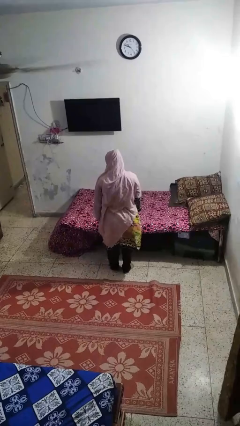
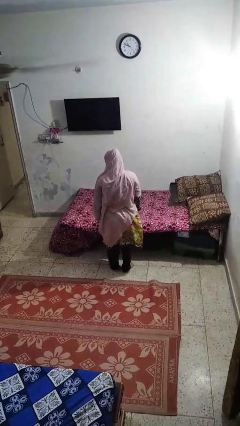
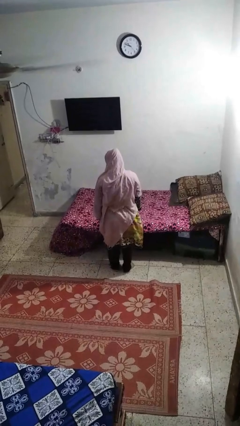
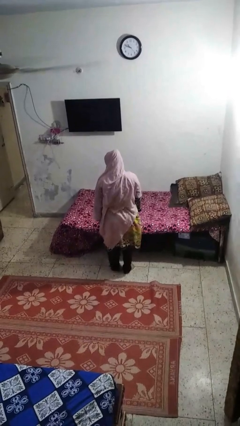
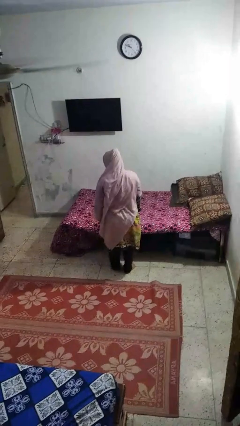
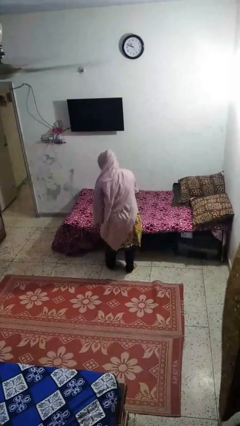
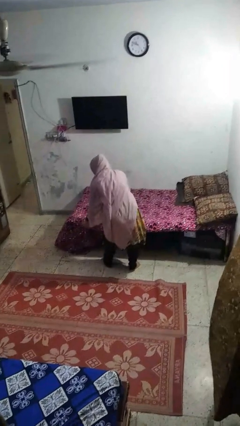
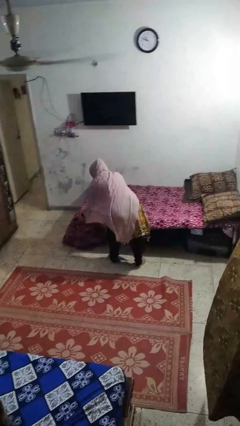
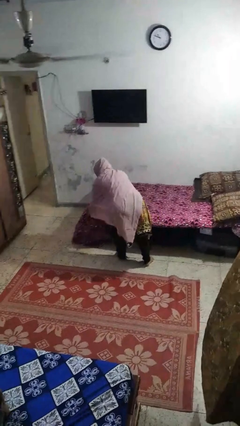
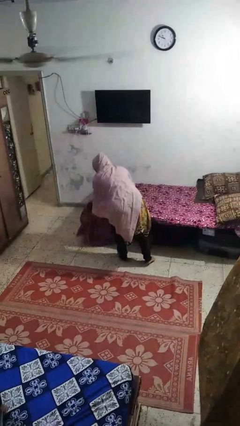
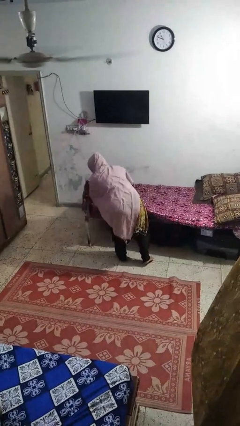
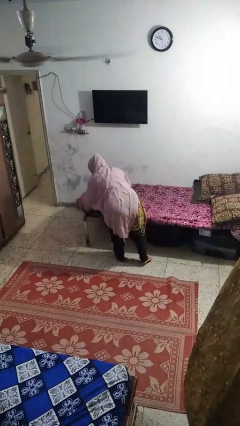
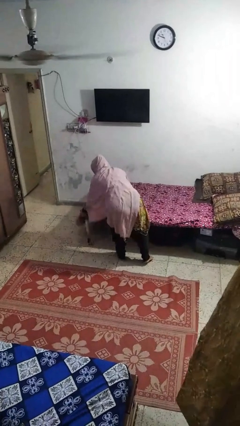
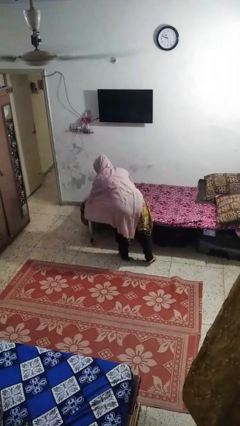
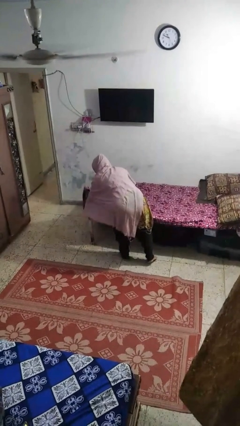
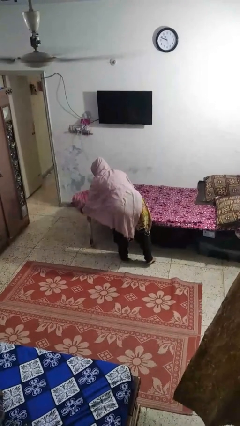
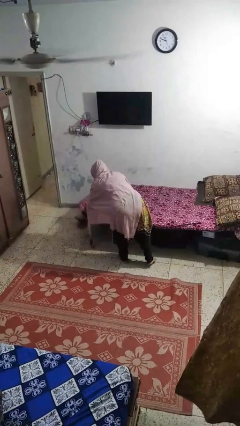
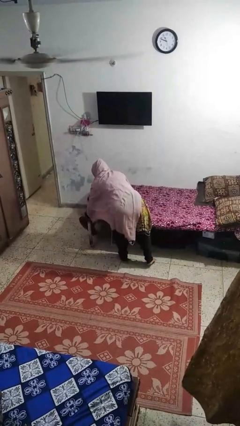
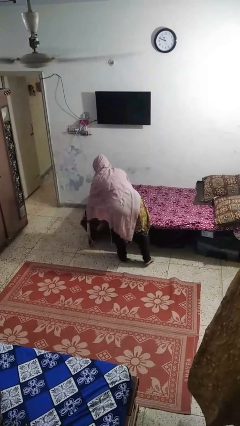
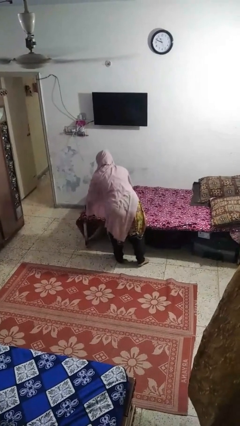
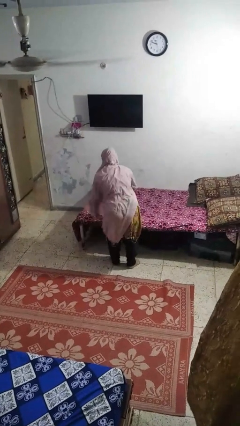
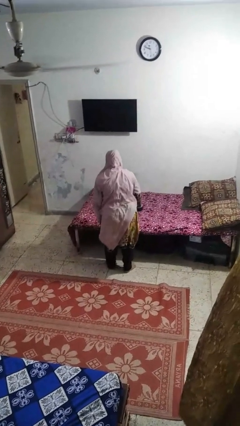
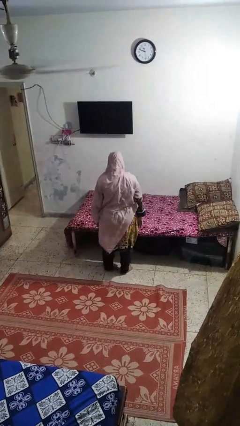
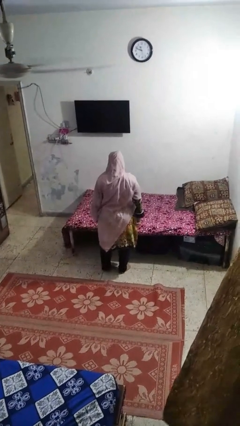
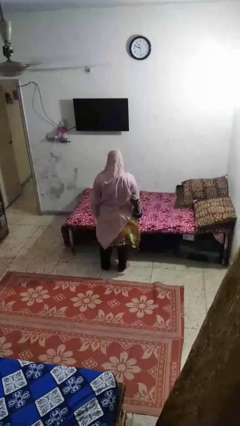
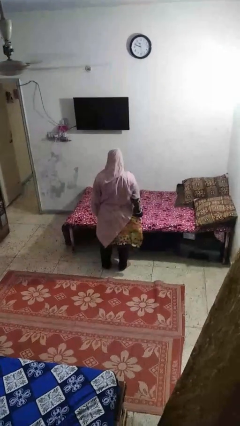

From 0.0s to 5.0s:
person makes bed

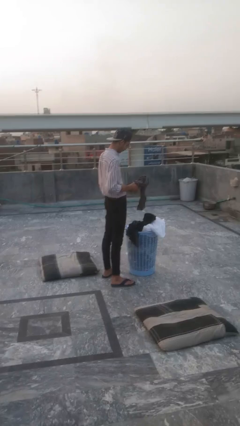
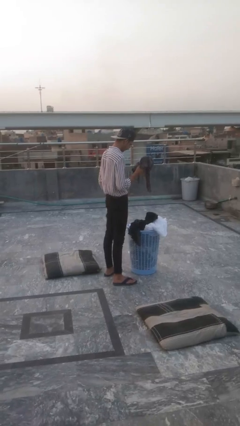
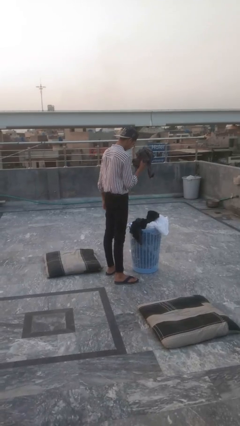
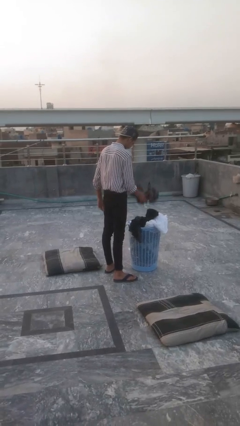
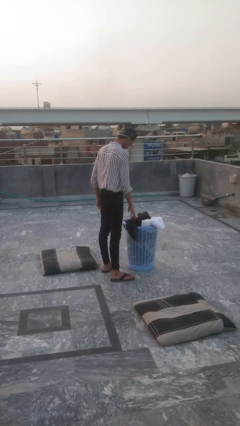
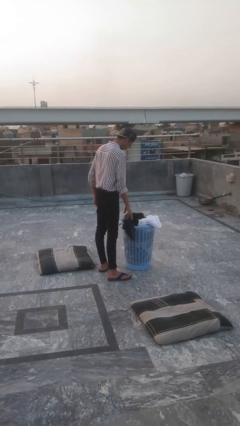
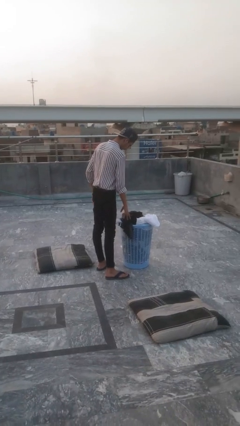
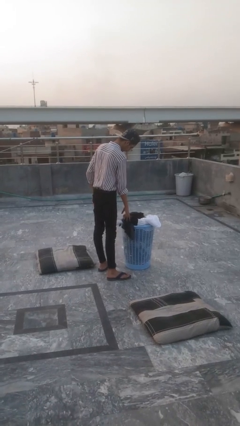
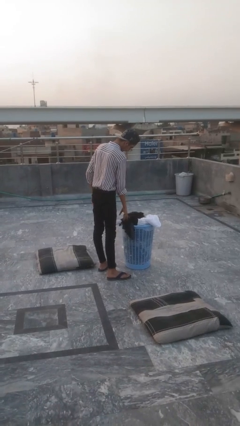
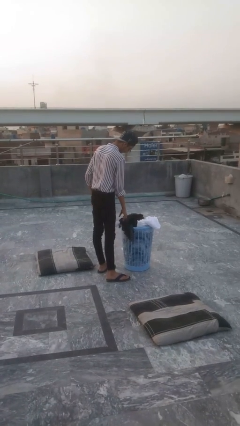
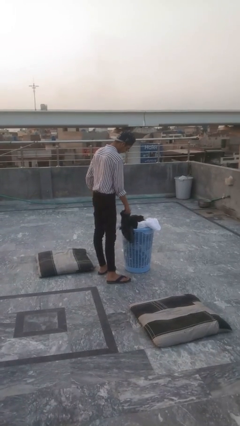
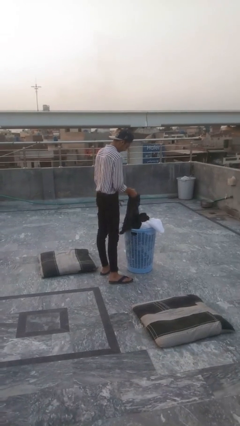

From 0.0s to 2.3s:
person puts object into basket

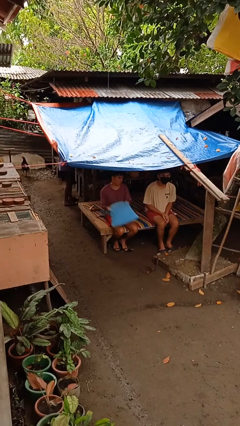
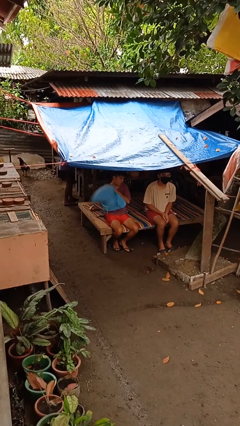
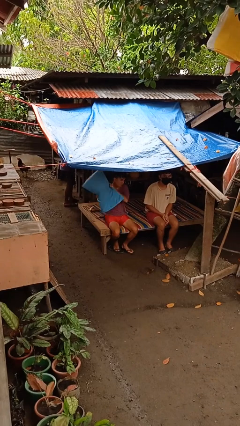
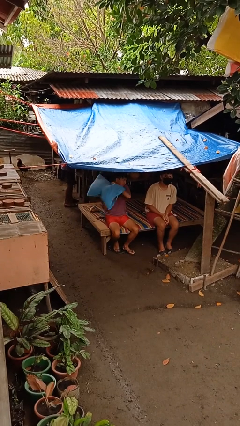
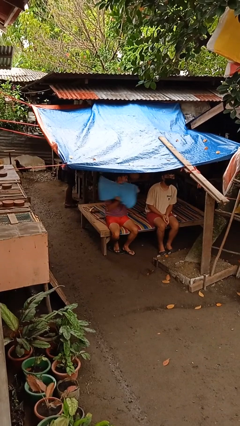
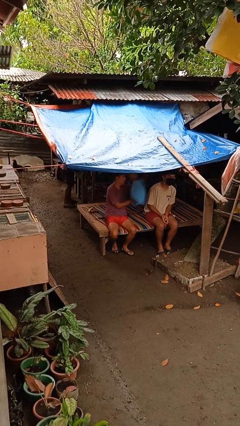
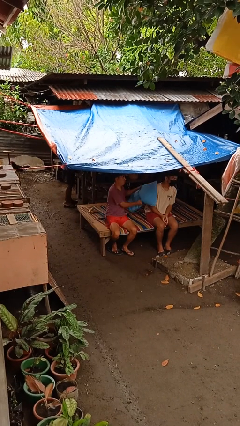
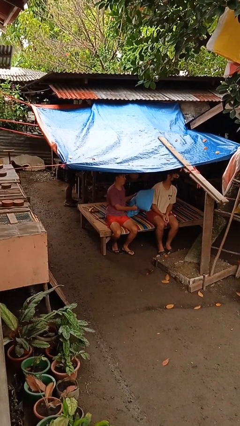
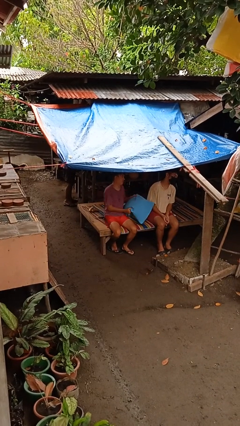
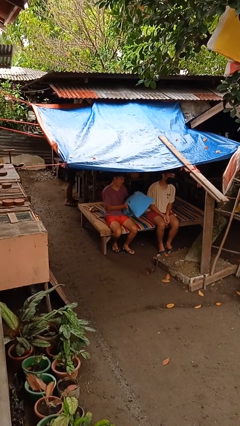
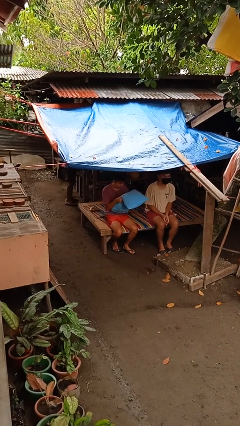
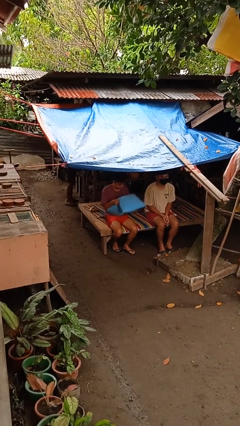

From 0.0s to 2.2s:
person hits person with pillow

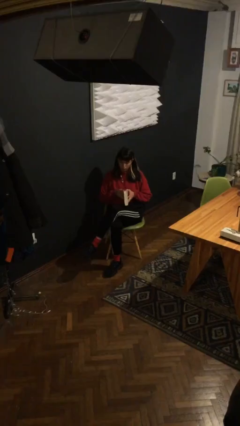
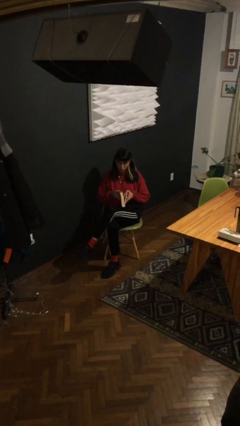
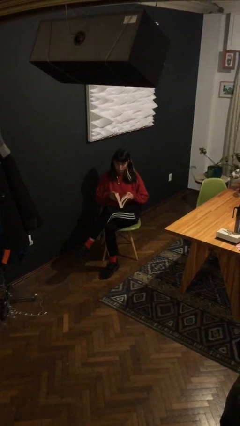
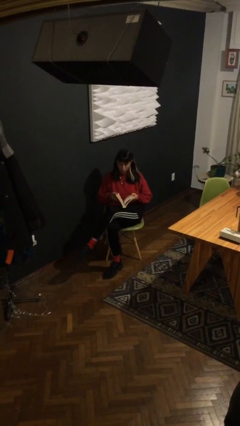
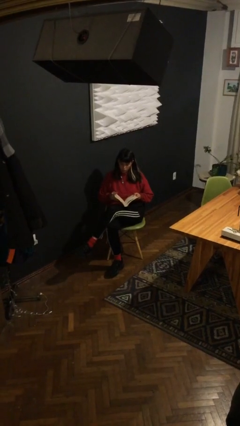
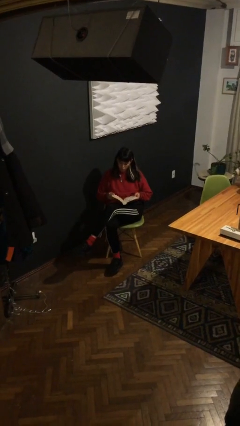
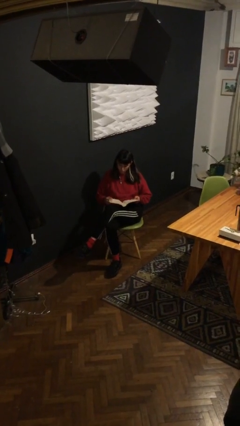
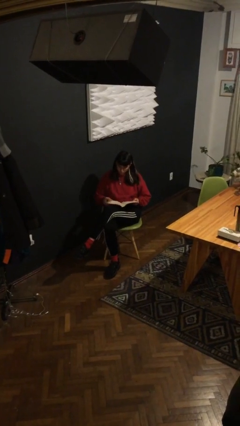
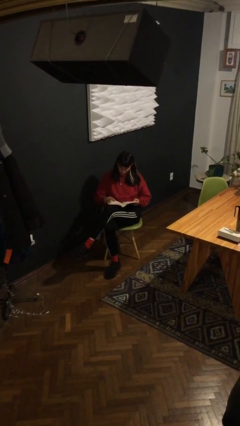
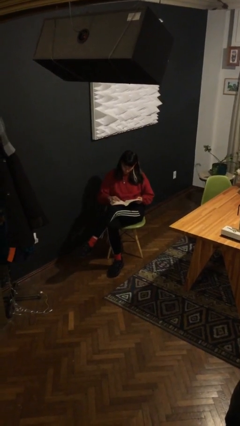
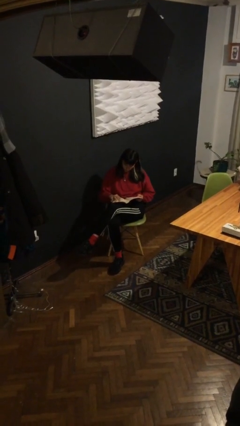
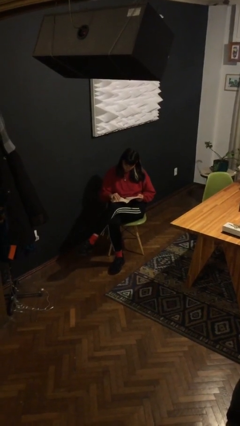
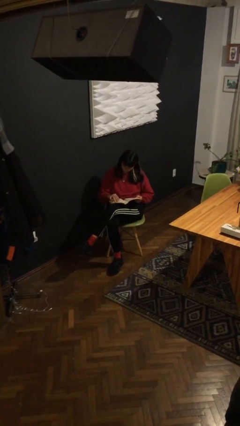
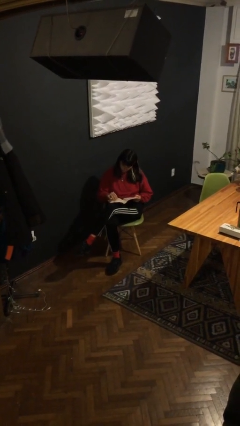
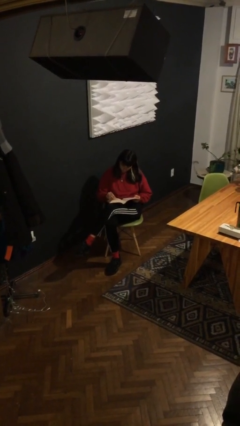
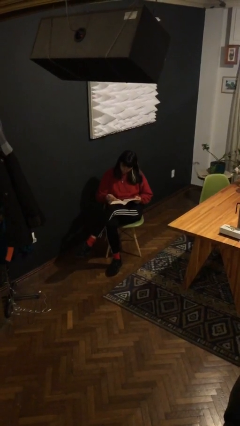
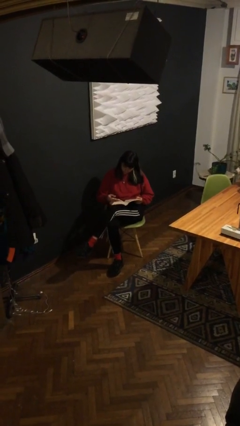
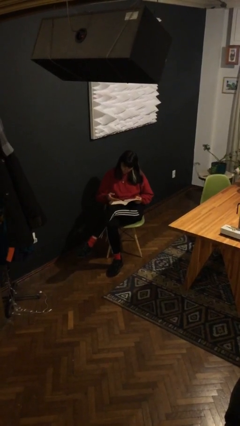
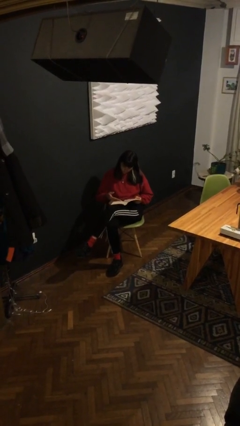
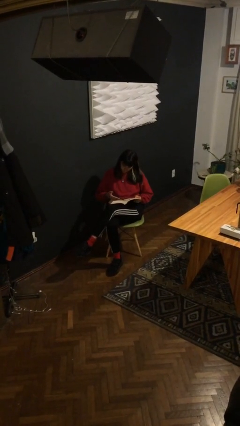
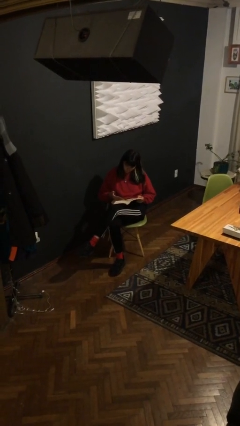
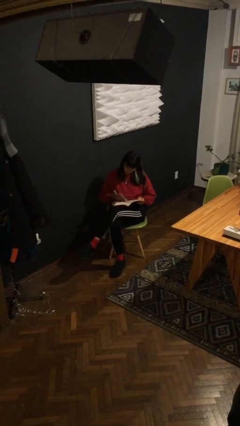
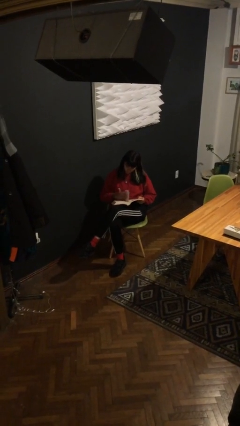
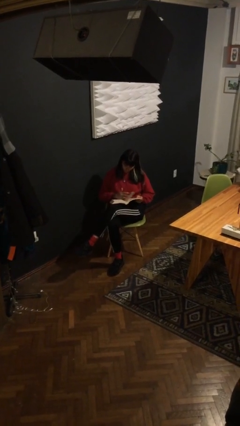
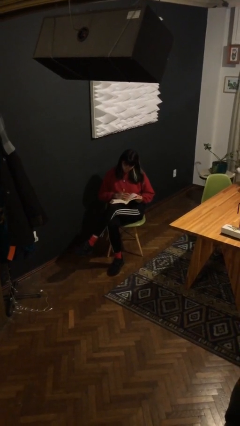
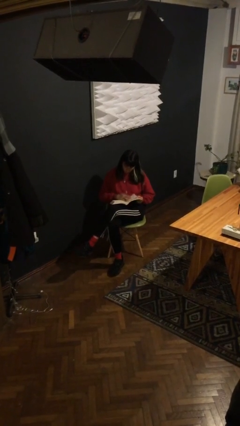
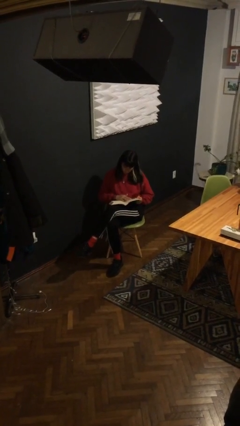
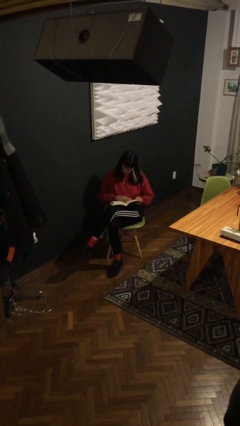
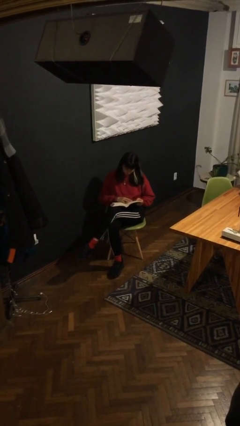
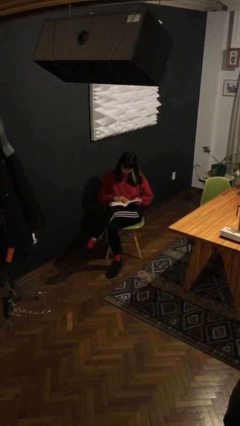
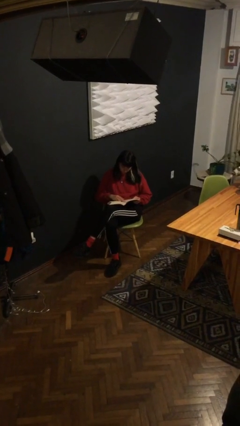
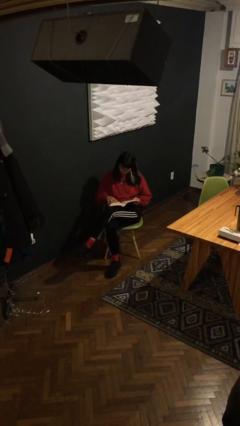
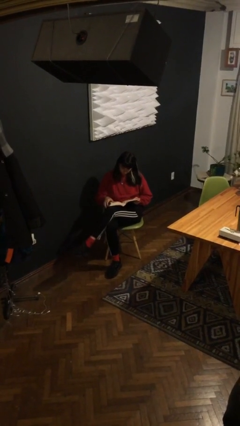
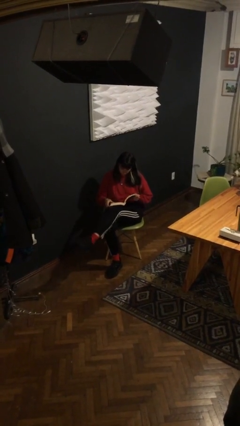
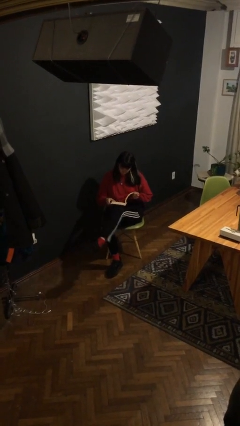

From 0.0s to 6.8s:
person reads document

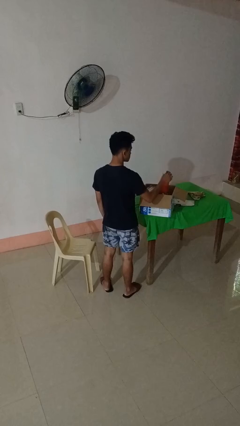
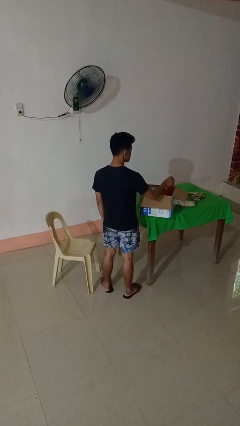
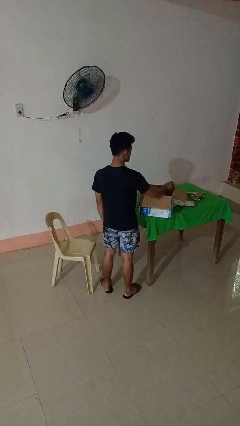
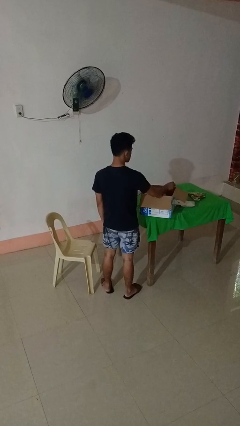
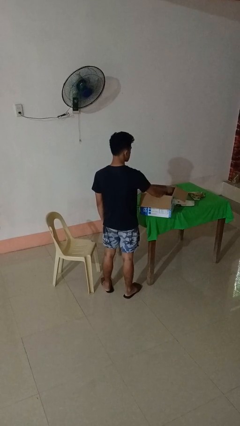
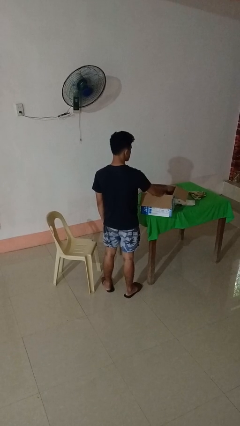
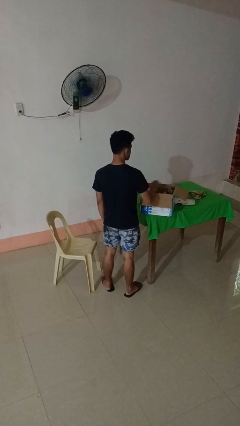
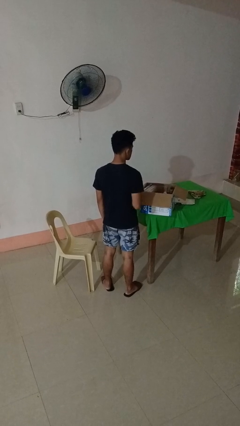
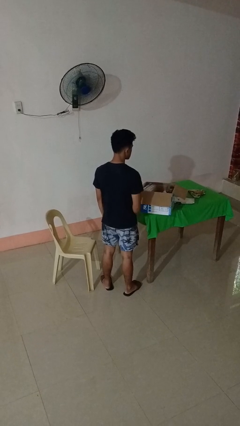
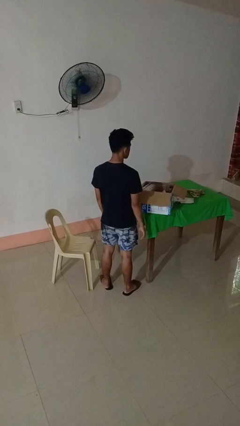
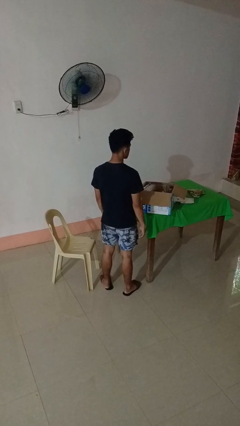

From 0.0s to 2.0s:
person puts object into box
